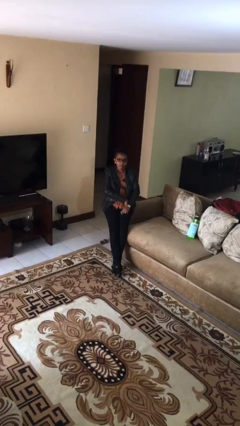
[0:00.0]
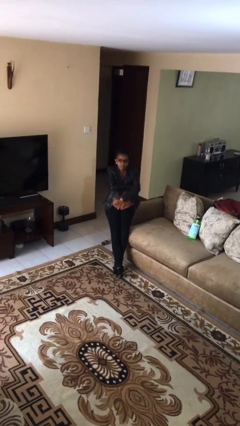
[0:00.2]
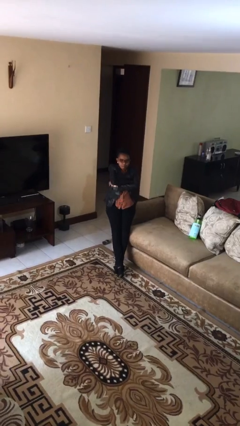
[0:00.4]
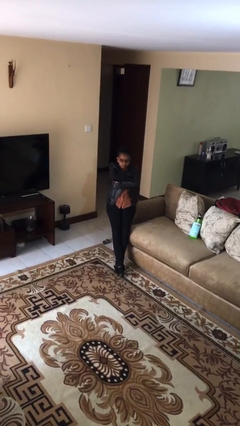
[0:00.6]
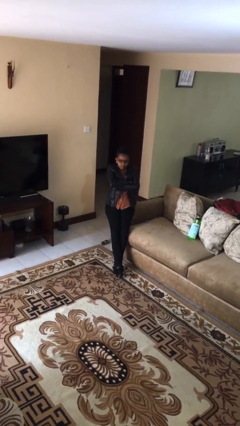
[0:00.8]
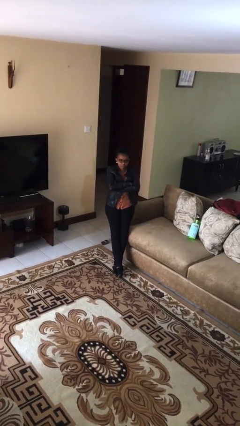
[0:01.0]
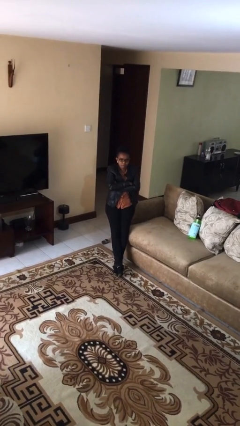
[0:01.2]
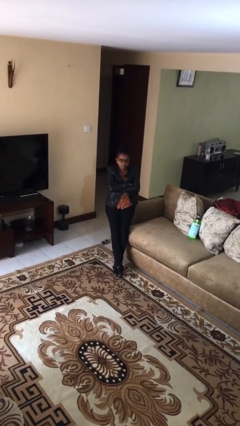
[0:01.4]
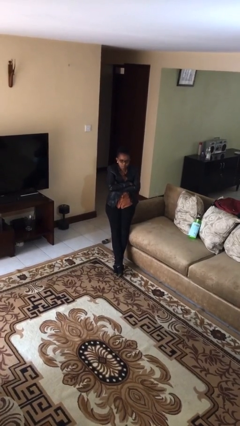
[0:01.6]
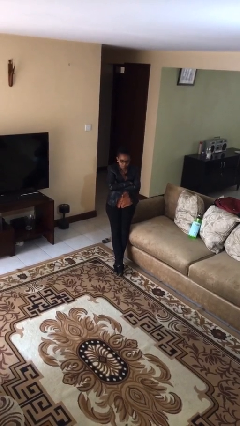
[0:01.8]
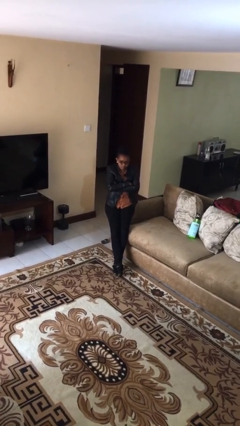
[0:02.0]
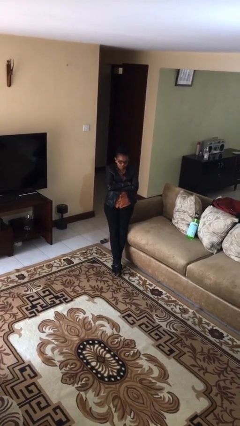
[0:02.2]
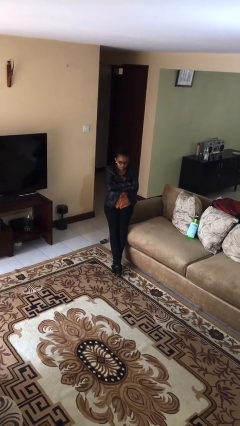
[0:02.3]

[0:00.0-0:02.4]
person crosses arms

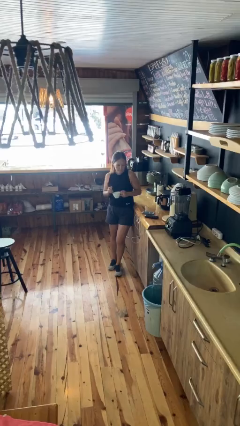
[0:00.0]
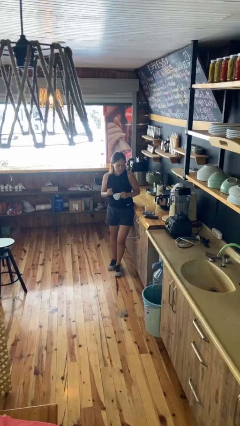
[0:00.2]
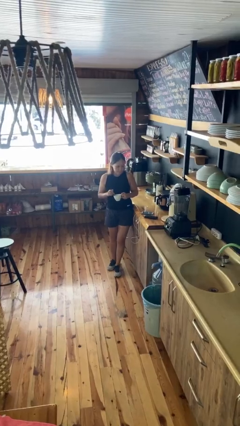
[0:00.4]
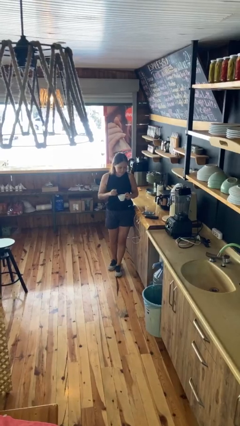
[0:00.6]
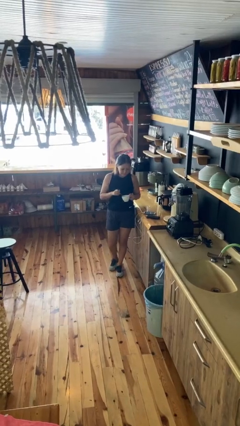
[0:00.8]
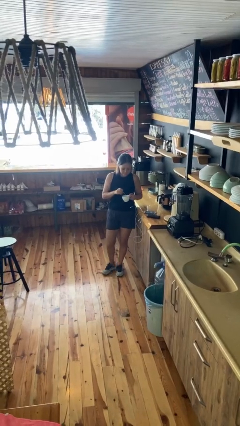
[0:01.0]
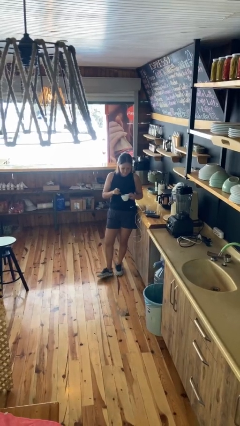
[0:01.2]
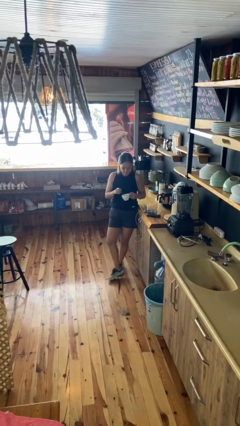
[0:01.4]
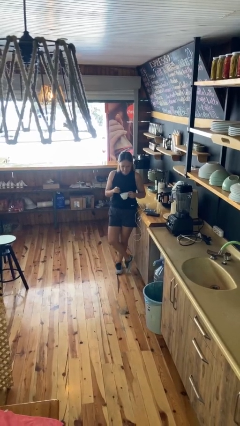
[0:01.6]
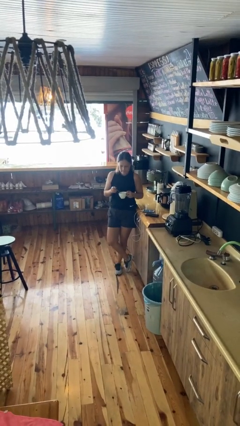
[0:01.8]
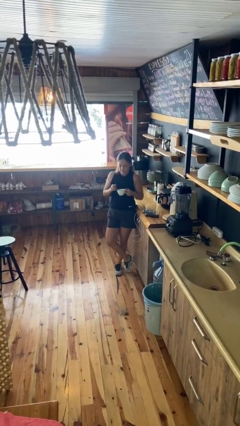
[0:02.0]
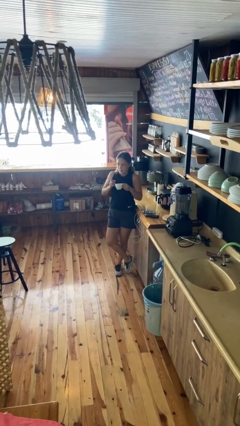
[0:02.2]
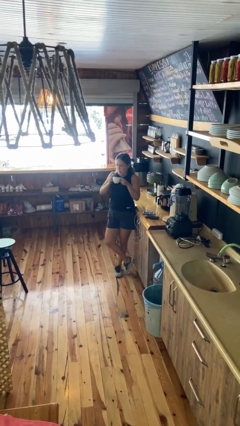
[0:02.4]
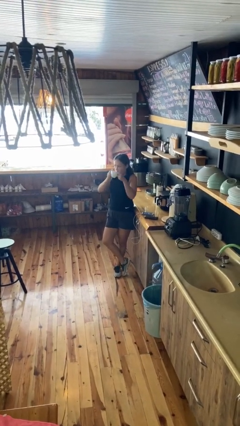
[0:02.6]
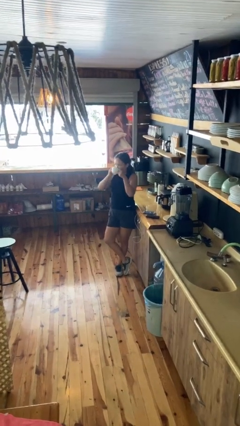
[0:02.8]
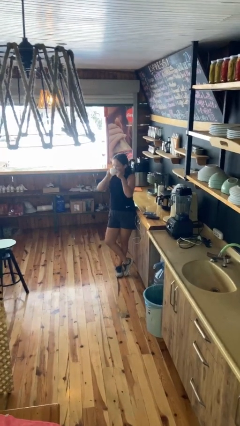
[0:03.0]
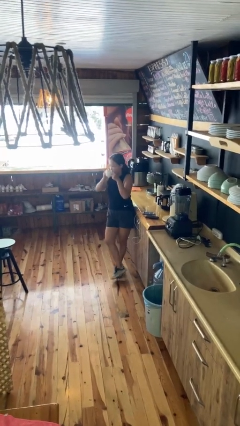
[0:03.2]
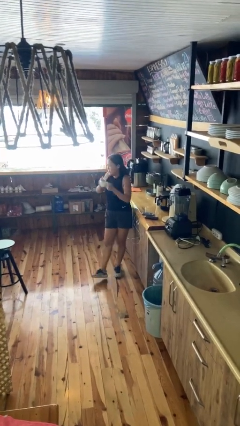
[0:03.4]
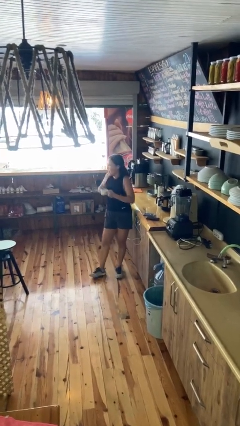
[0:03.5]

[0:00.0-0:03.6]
person stirs mug

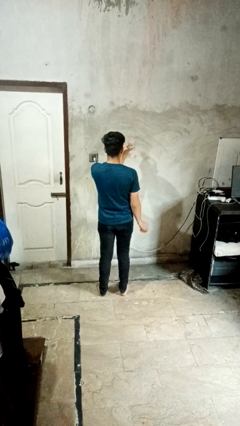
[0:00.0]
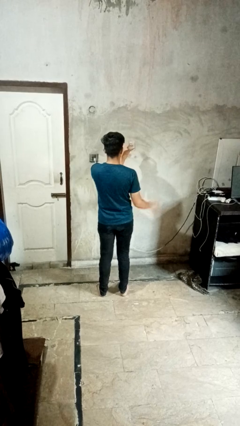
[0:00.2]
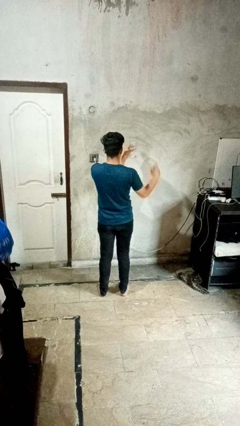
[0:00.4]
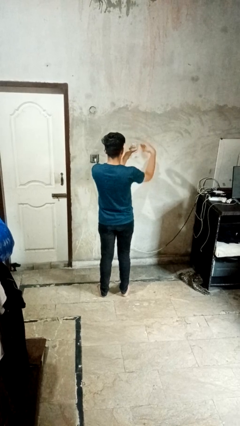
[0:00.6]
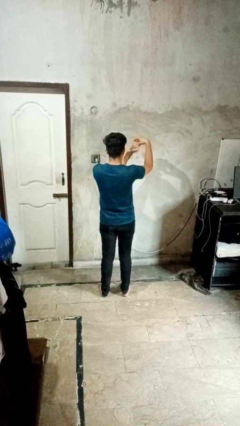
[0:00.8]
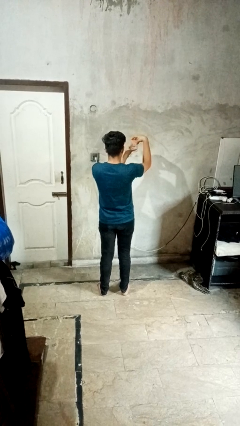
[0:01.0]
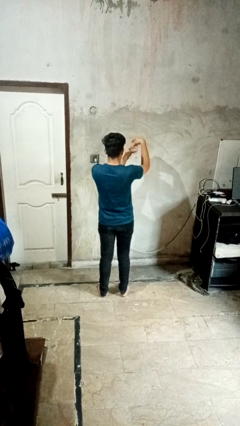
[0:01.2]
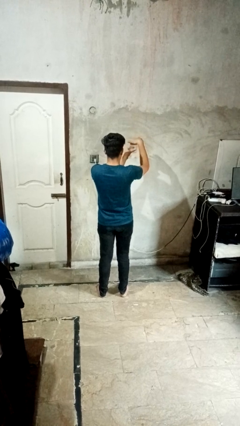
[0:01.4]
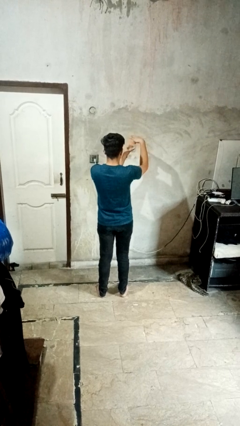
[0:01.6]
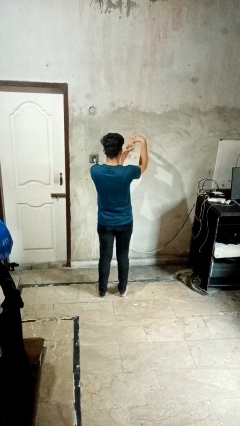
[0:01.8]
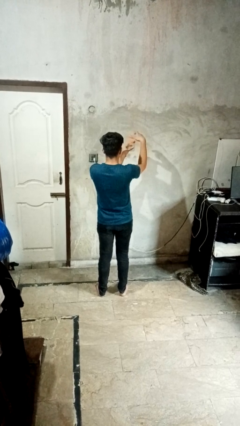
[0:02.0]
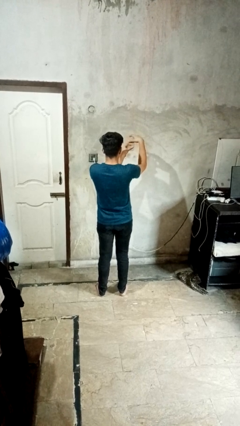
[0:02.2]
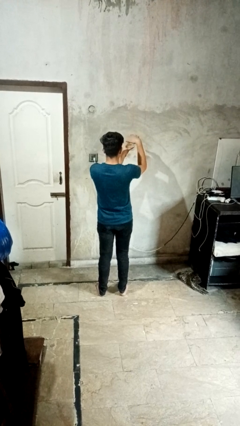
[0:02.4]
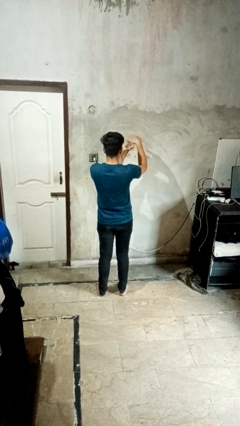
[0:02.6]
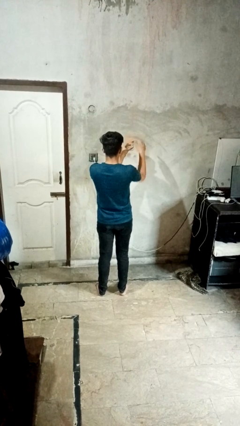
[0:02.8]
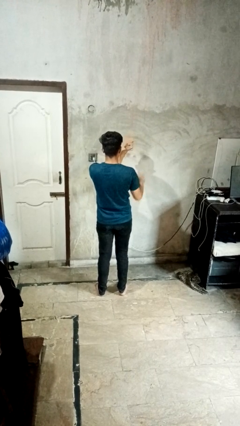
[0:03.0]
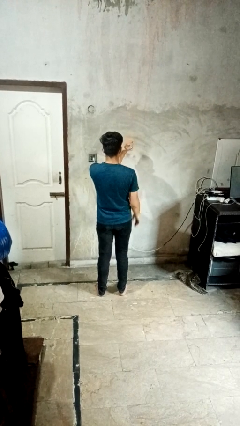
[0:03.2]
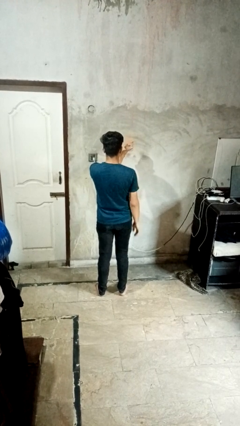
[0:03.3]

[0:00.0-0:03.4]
person closes jar

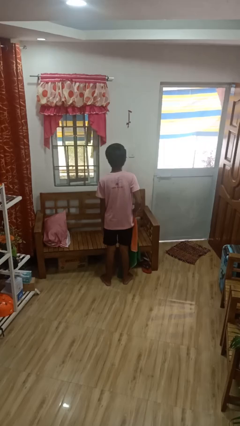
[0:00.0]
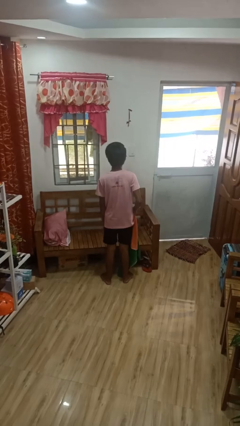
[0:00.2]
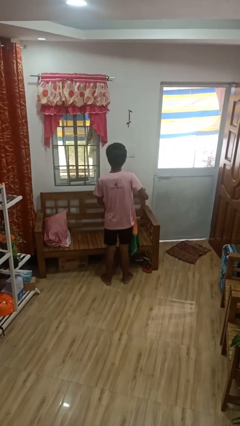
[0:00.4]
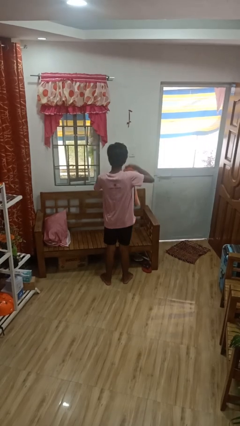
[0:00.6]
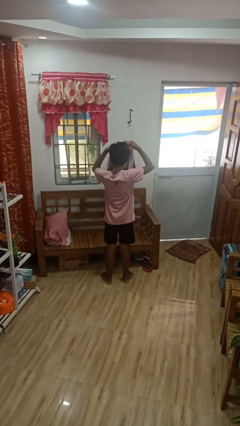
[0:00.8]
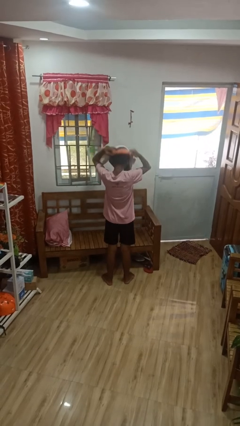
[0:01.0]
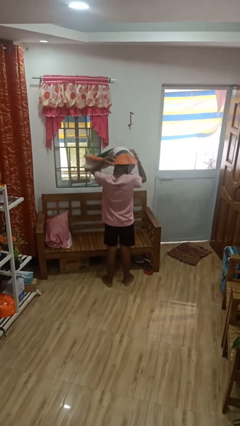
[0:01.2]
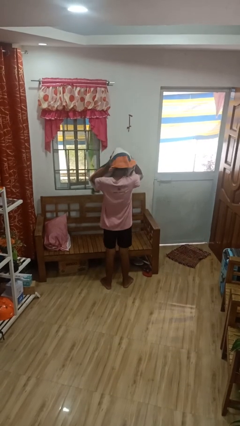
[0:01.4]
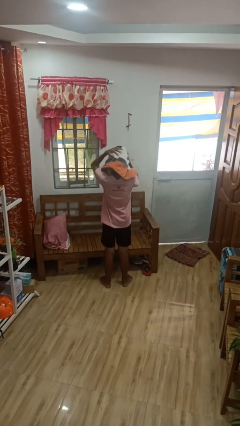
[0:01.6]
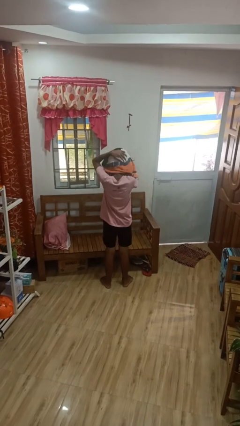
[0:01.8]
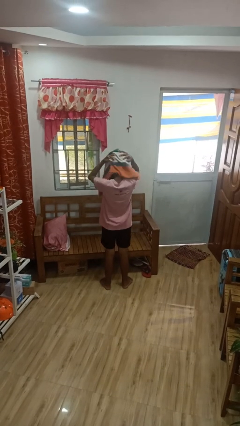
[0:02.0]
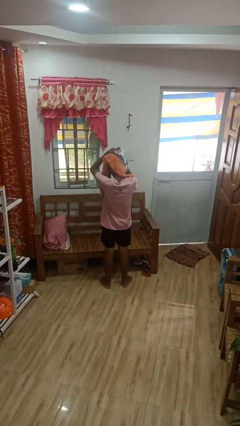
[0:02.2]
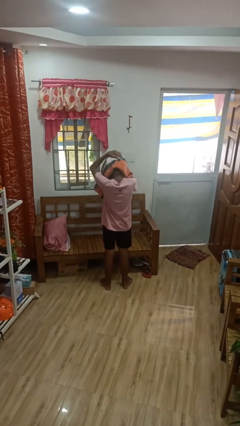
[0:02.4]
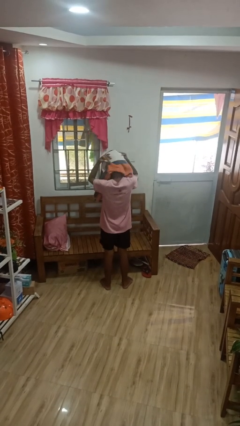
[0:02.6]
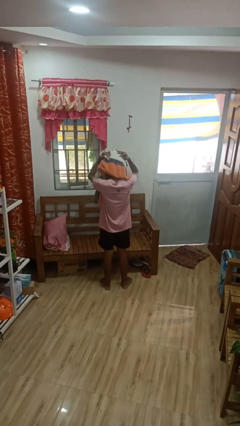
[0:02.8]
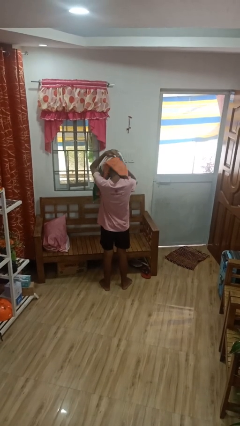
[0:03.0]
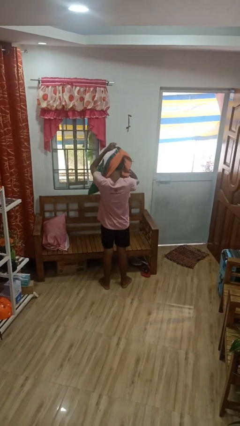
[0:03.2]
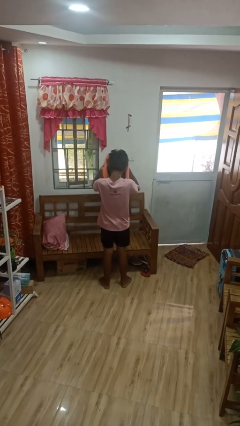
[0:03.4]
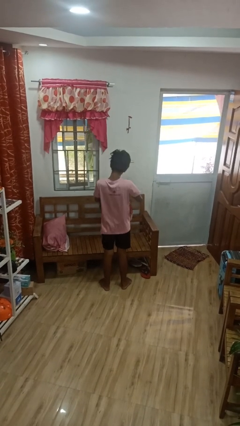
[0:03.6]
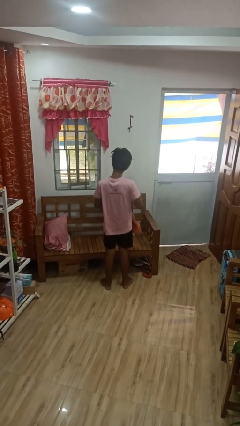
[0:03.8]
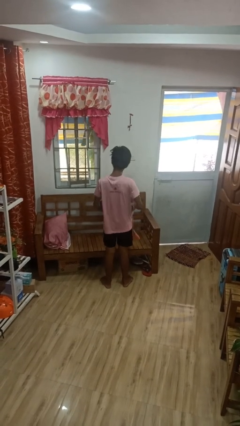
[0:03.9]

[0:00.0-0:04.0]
person dries hair with towel

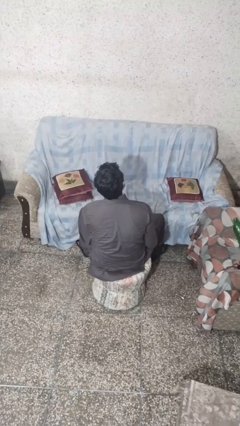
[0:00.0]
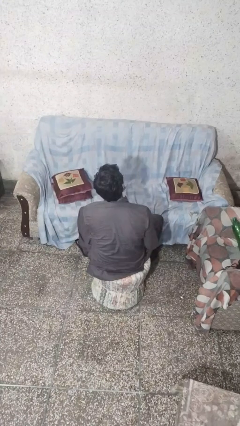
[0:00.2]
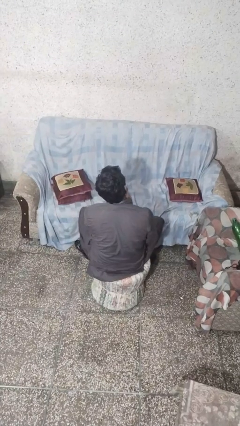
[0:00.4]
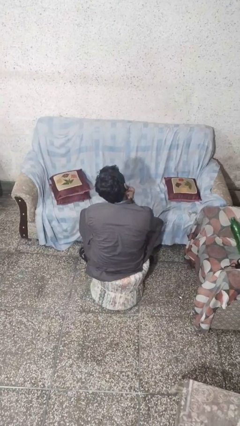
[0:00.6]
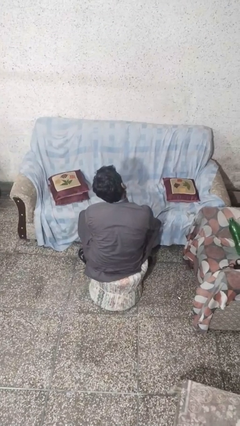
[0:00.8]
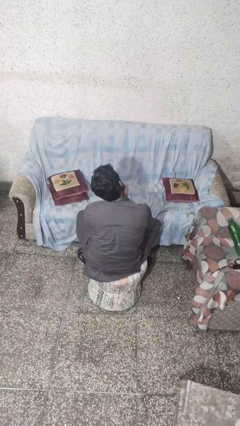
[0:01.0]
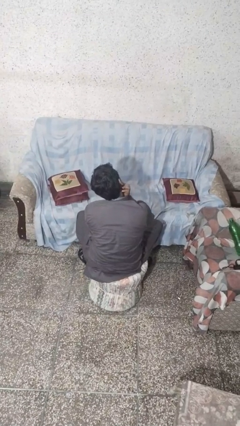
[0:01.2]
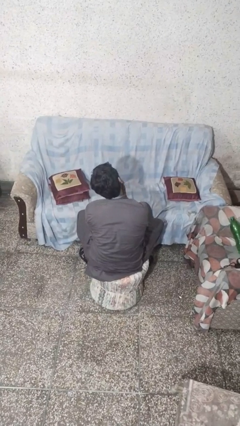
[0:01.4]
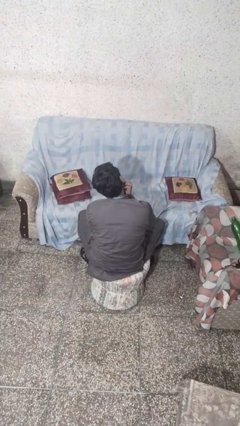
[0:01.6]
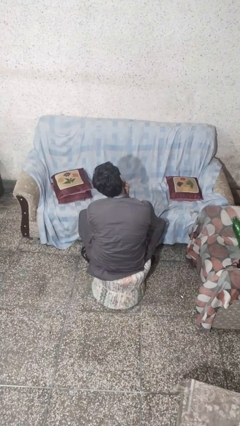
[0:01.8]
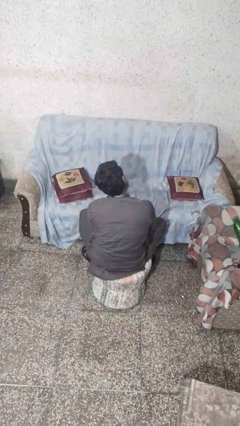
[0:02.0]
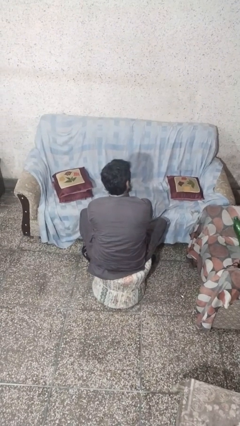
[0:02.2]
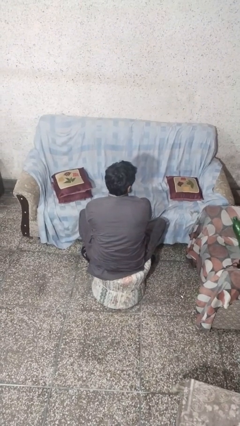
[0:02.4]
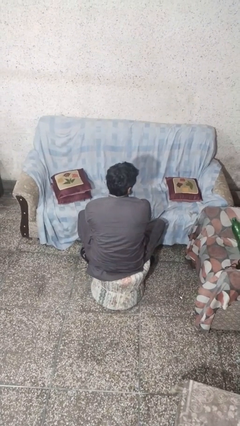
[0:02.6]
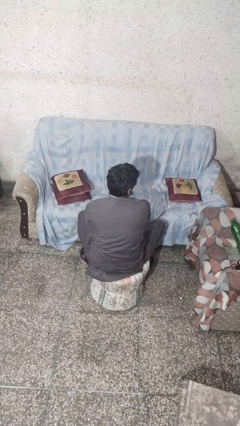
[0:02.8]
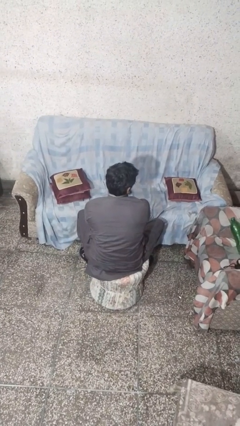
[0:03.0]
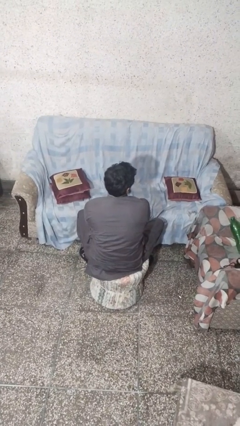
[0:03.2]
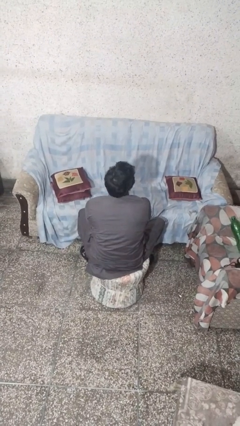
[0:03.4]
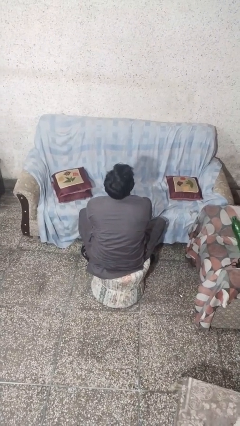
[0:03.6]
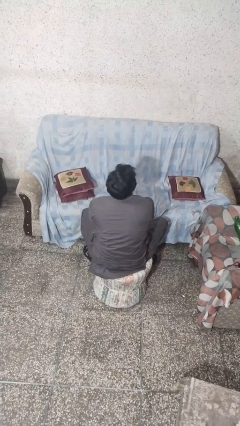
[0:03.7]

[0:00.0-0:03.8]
person strokes chin

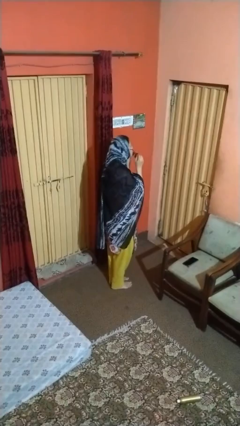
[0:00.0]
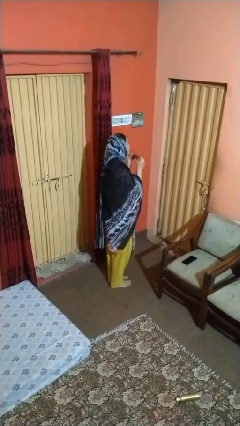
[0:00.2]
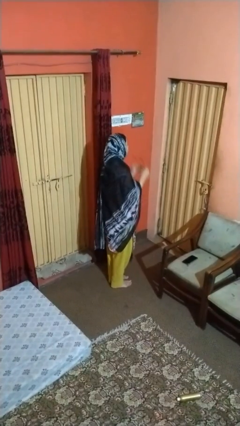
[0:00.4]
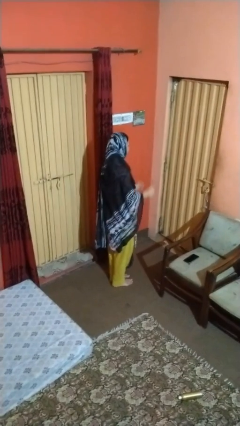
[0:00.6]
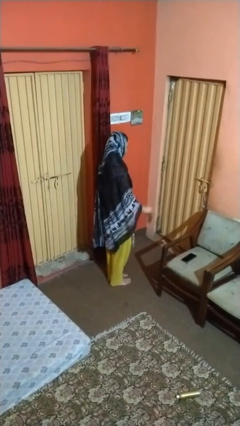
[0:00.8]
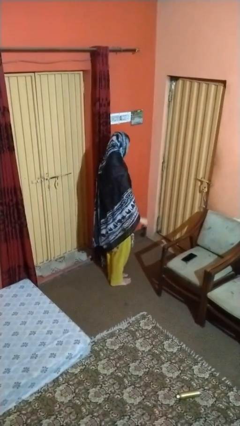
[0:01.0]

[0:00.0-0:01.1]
person takes off sunglasses
